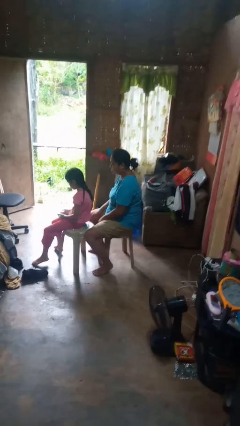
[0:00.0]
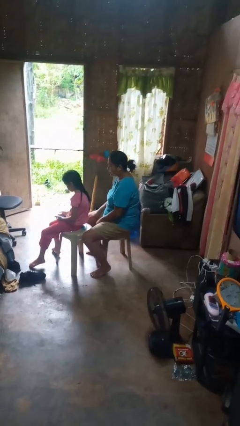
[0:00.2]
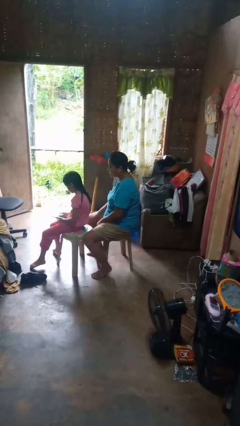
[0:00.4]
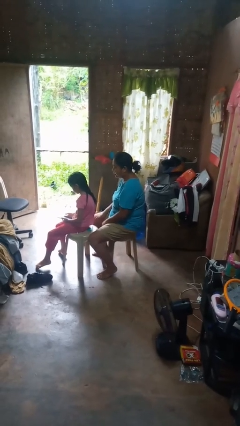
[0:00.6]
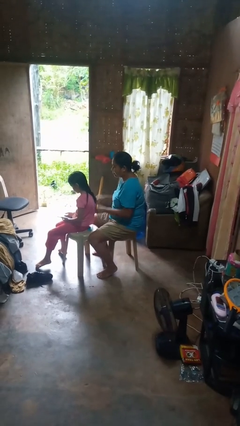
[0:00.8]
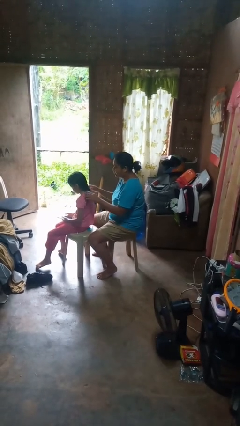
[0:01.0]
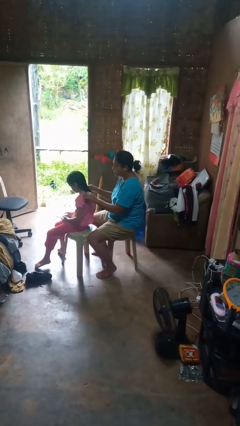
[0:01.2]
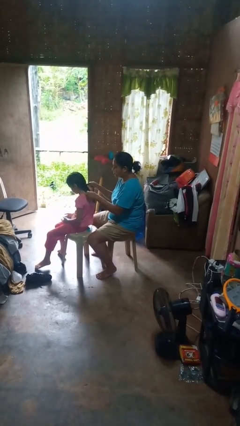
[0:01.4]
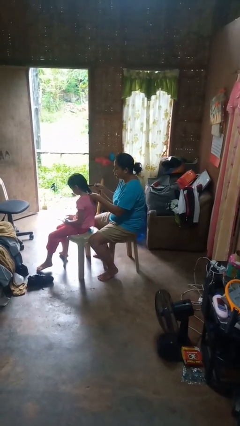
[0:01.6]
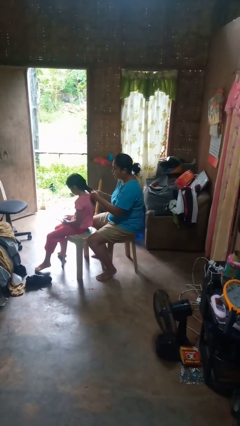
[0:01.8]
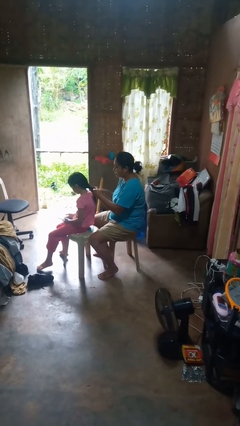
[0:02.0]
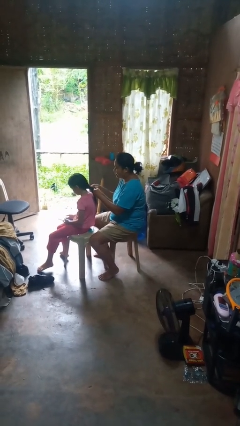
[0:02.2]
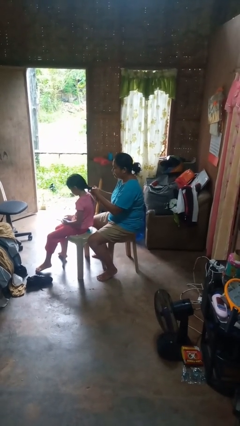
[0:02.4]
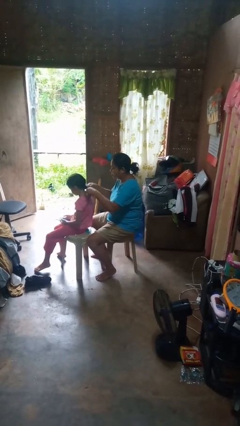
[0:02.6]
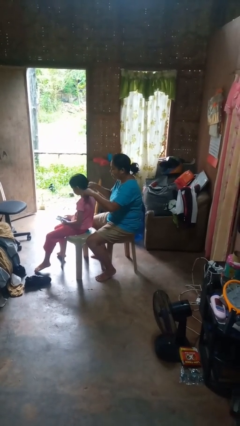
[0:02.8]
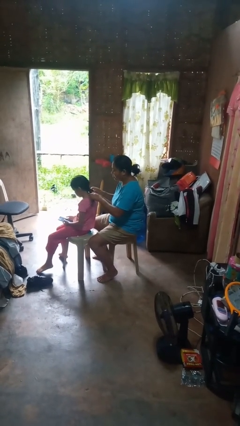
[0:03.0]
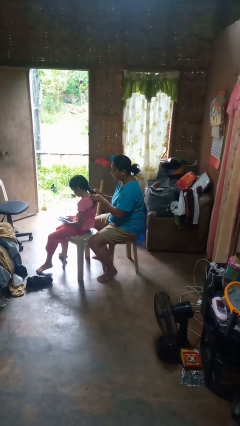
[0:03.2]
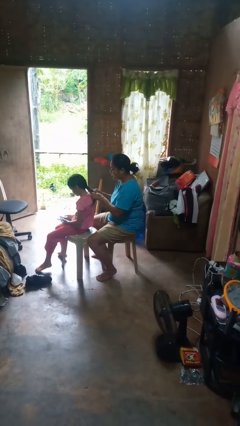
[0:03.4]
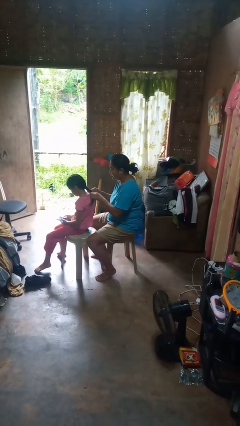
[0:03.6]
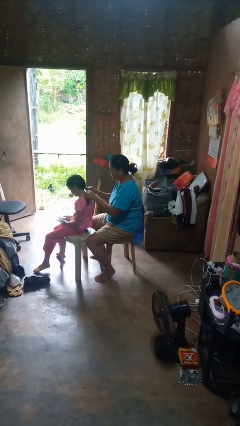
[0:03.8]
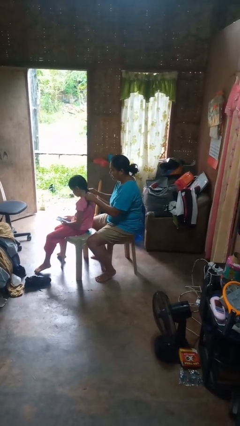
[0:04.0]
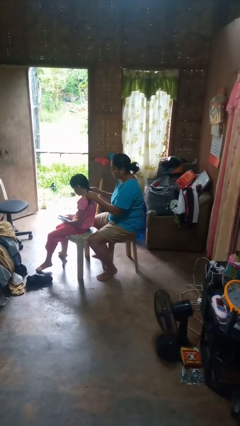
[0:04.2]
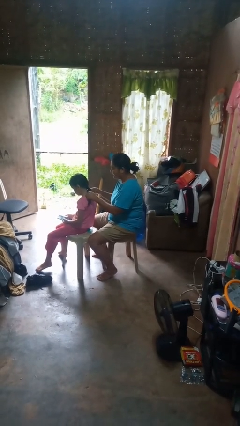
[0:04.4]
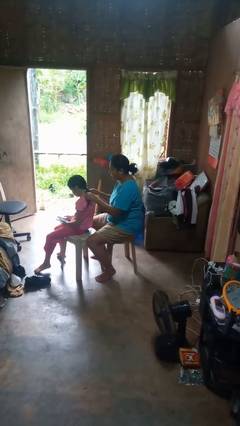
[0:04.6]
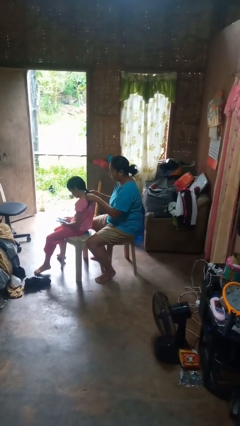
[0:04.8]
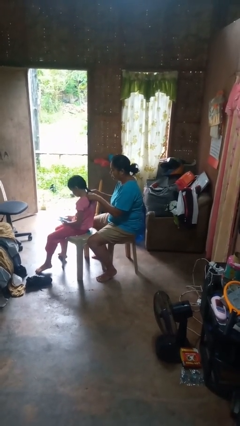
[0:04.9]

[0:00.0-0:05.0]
person braids hair of person

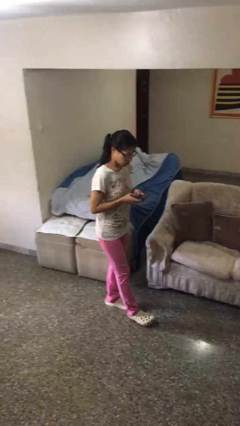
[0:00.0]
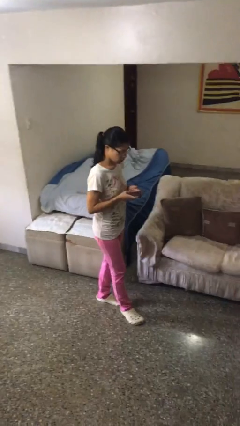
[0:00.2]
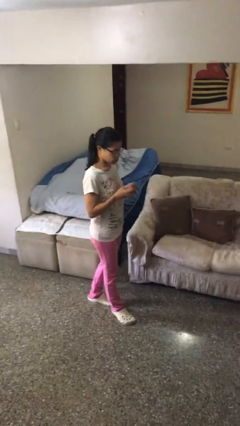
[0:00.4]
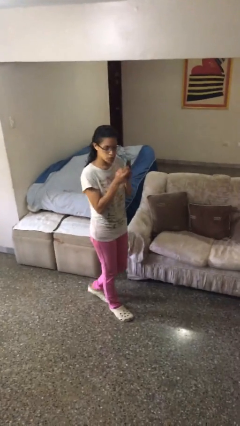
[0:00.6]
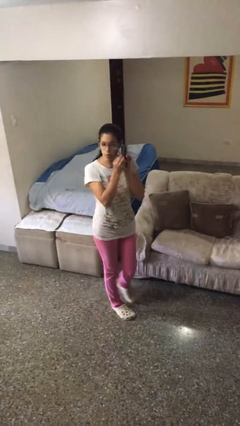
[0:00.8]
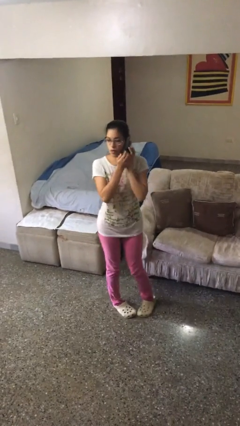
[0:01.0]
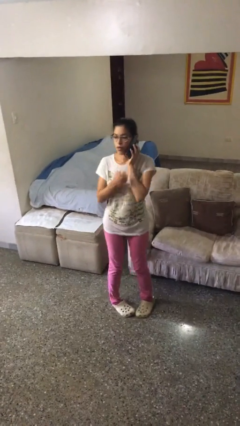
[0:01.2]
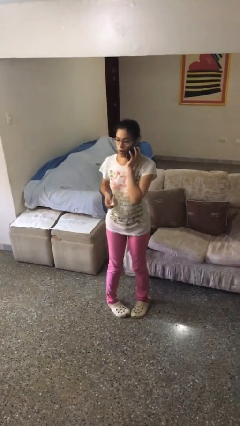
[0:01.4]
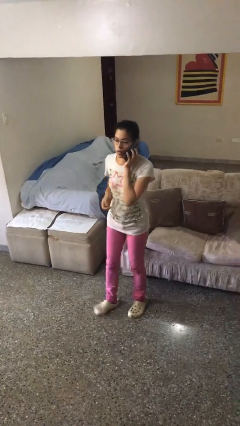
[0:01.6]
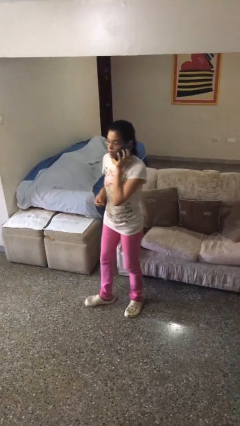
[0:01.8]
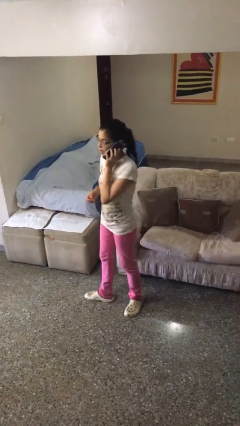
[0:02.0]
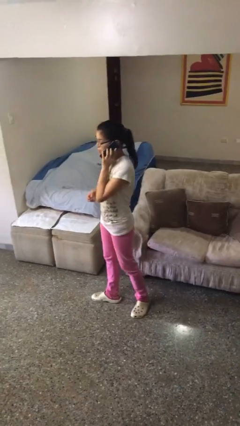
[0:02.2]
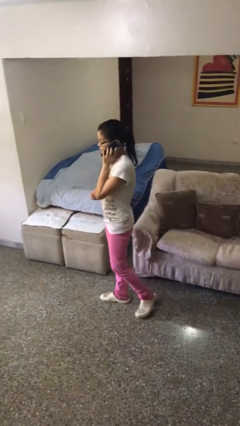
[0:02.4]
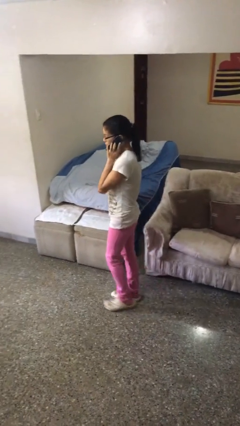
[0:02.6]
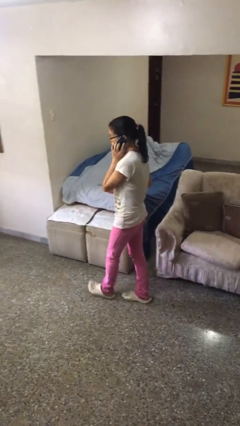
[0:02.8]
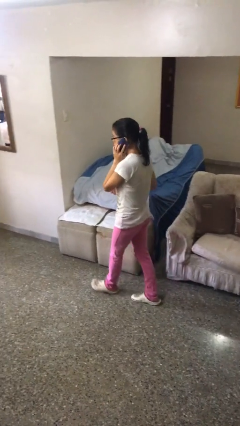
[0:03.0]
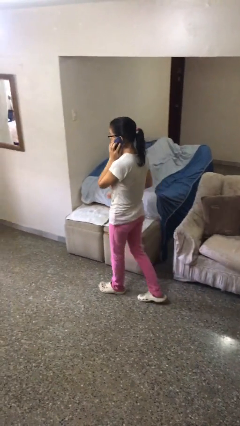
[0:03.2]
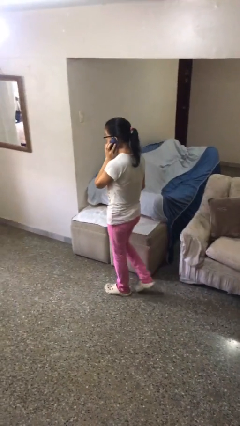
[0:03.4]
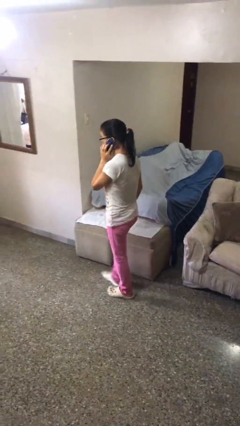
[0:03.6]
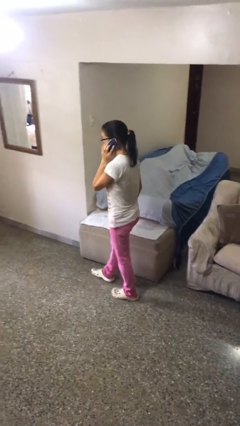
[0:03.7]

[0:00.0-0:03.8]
person talks on phone

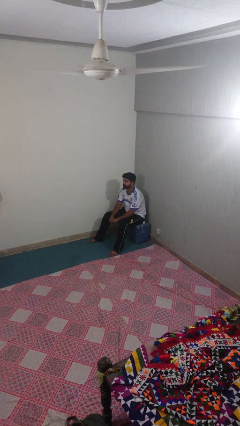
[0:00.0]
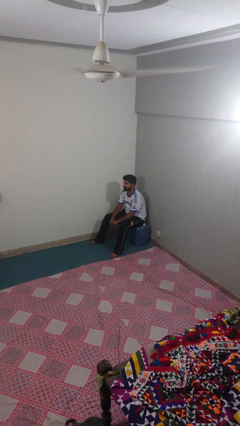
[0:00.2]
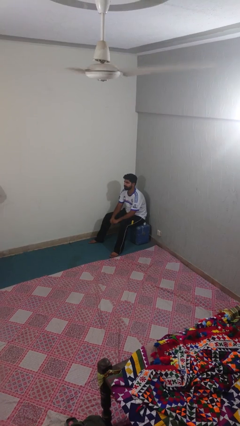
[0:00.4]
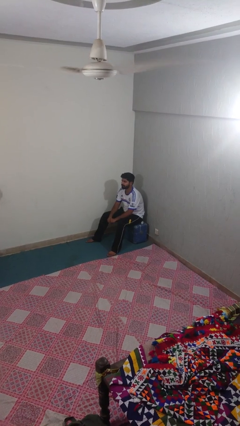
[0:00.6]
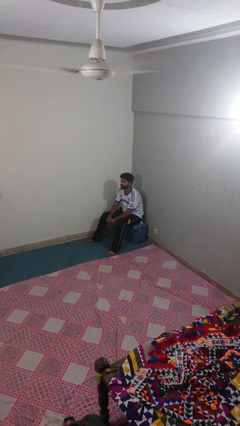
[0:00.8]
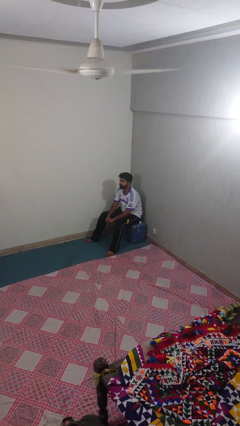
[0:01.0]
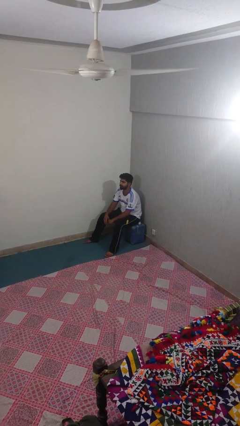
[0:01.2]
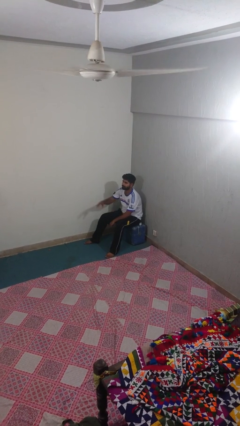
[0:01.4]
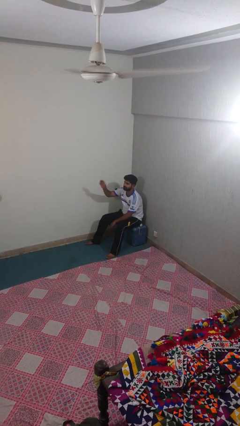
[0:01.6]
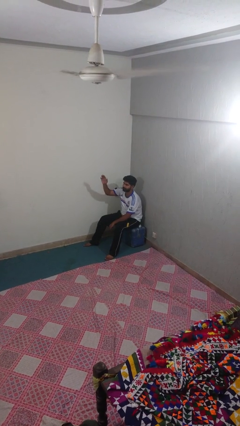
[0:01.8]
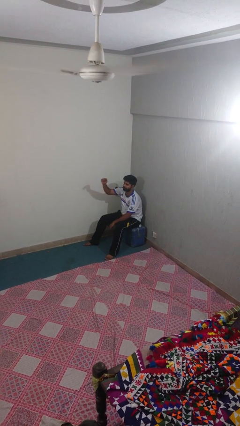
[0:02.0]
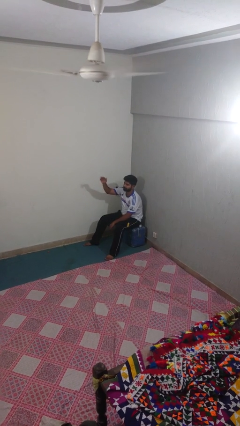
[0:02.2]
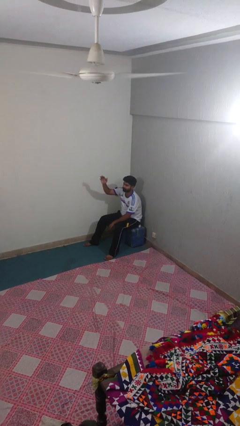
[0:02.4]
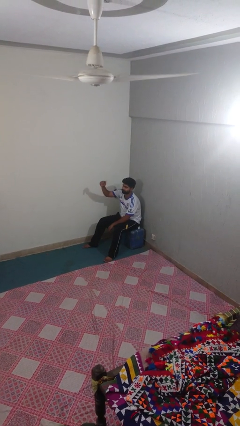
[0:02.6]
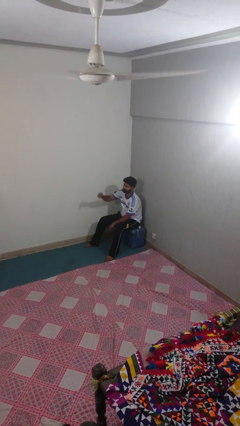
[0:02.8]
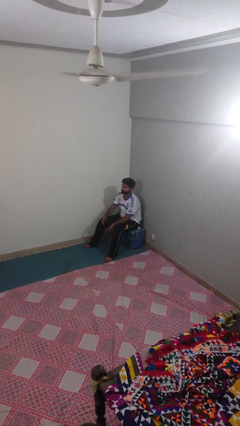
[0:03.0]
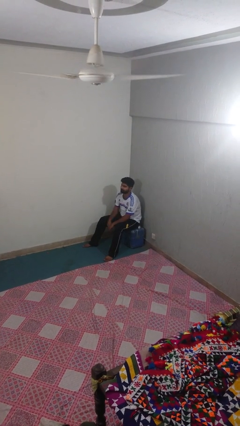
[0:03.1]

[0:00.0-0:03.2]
person gestures come here

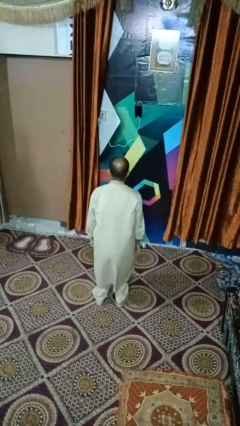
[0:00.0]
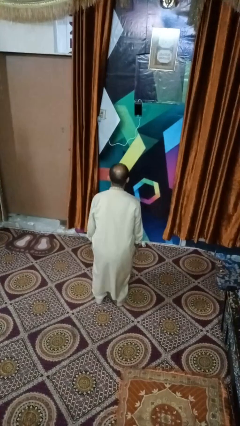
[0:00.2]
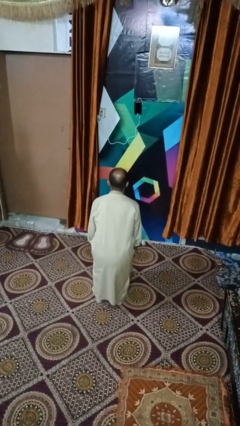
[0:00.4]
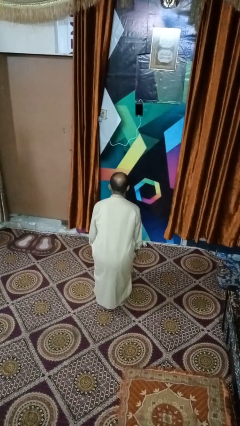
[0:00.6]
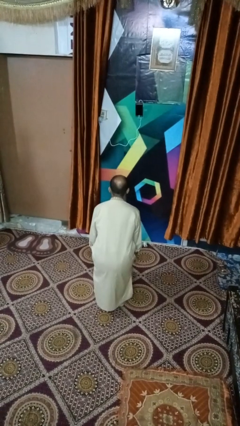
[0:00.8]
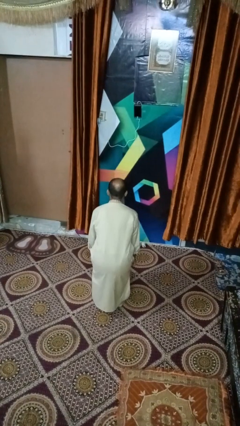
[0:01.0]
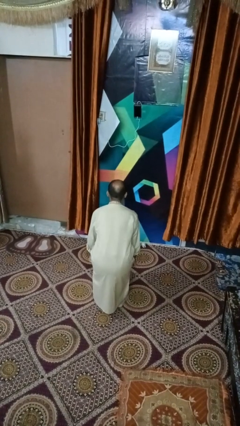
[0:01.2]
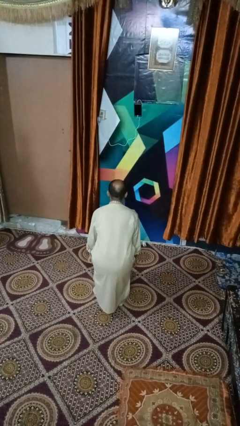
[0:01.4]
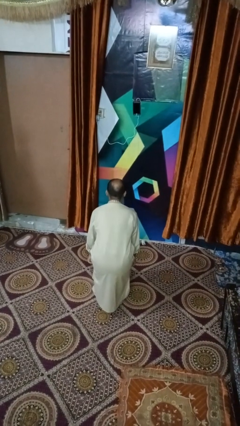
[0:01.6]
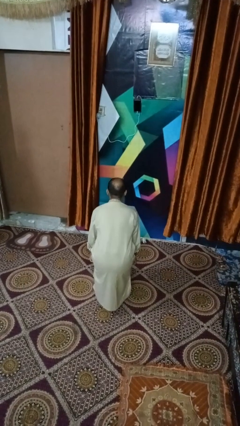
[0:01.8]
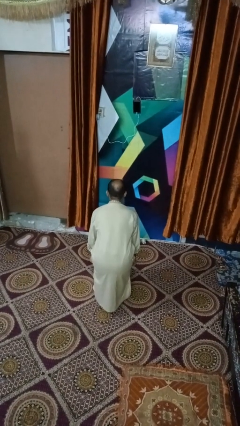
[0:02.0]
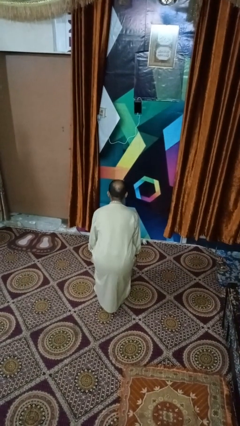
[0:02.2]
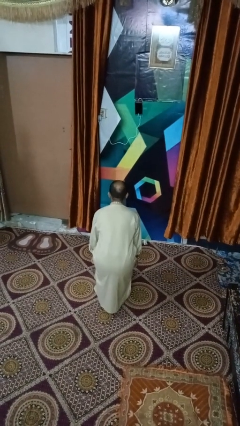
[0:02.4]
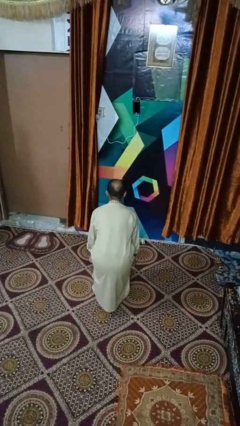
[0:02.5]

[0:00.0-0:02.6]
person squats

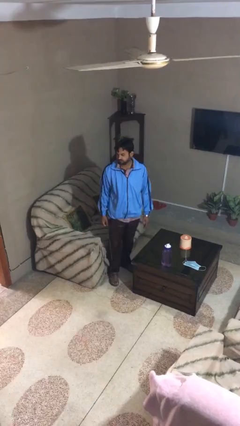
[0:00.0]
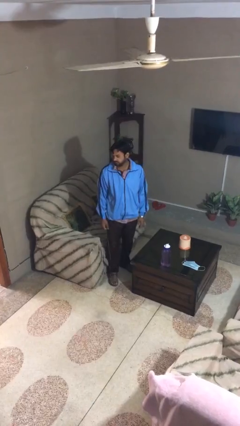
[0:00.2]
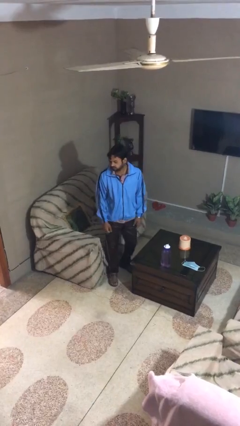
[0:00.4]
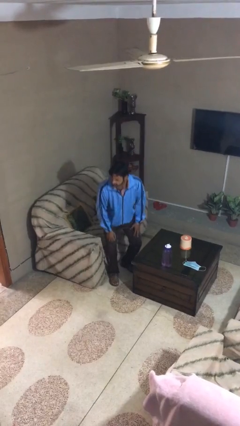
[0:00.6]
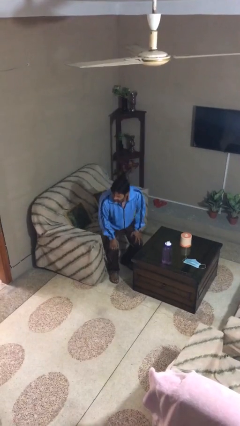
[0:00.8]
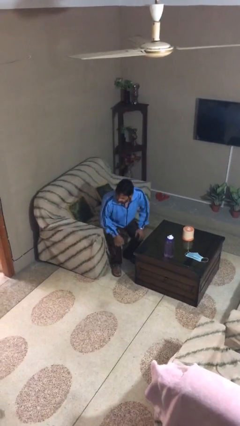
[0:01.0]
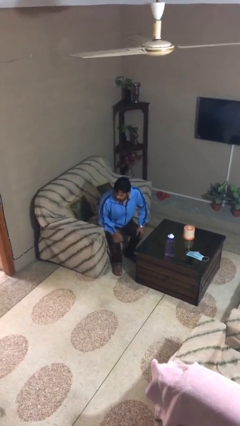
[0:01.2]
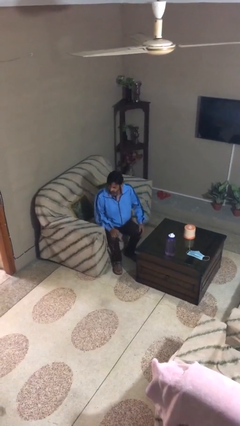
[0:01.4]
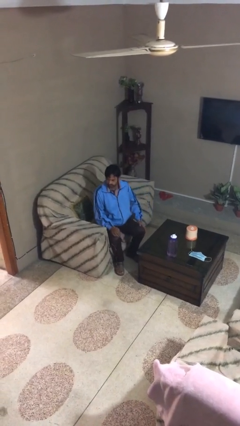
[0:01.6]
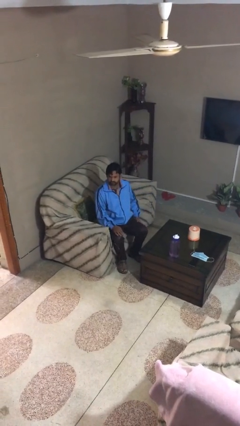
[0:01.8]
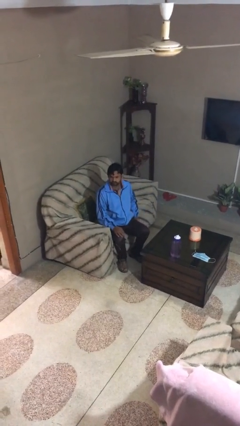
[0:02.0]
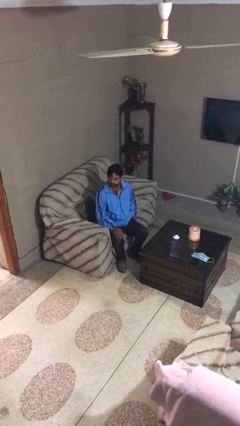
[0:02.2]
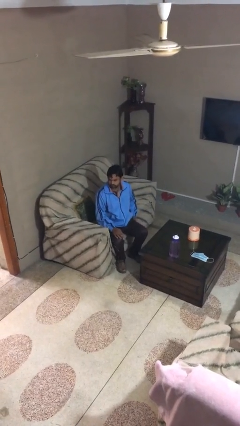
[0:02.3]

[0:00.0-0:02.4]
person sits down

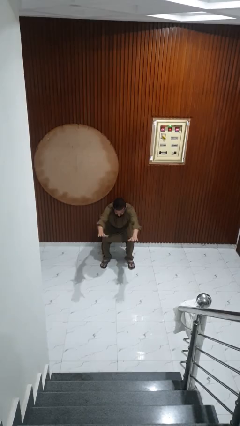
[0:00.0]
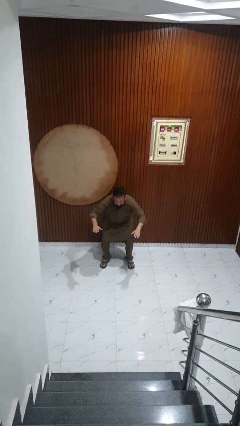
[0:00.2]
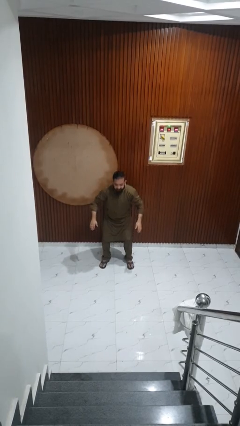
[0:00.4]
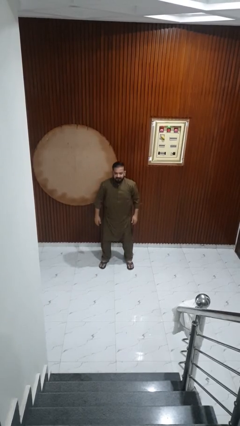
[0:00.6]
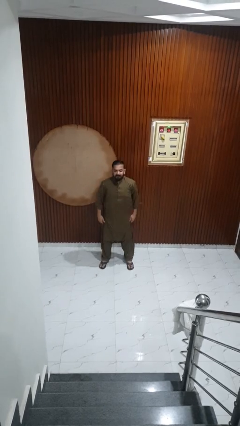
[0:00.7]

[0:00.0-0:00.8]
person stands up
